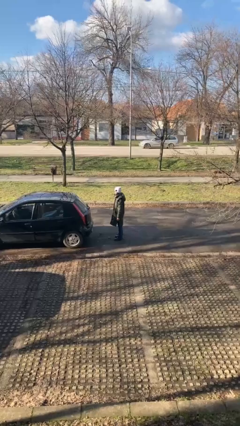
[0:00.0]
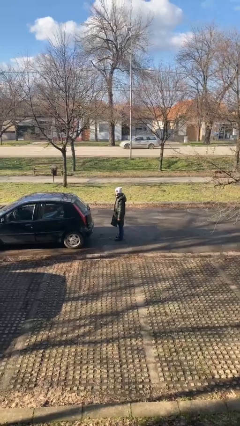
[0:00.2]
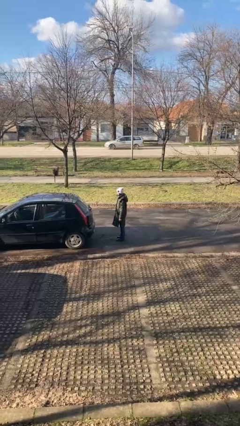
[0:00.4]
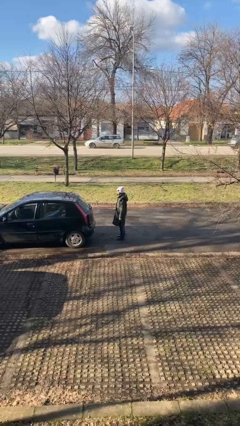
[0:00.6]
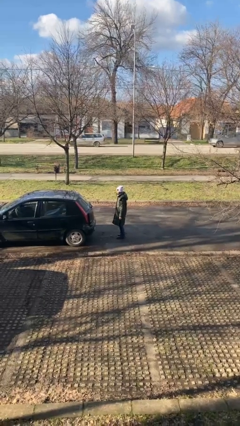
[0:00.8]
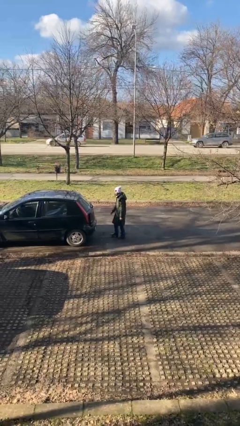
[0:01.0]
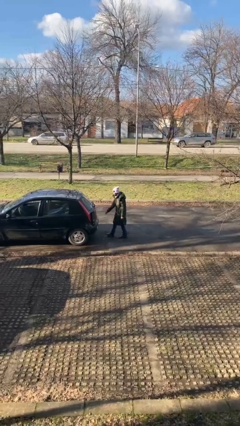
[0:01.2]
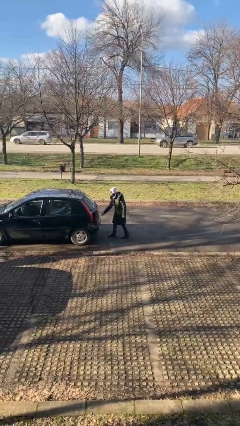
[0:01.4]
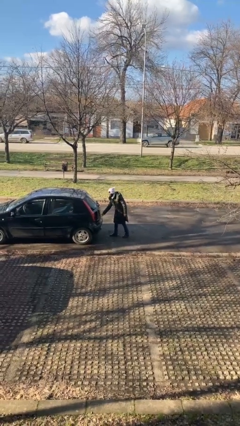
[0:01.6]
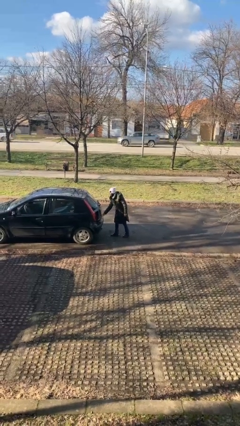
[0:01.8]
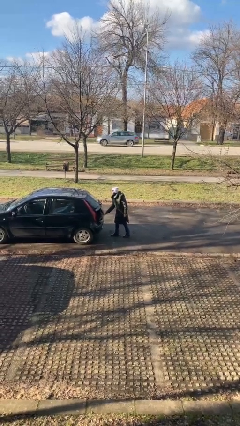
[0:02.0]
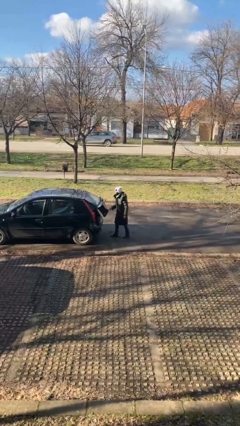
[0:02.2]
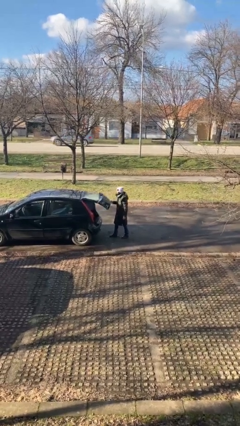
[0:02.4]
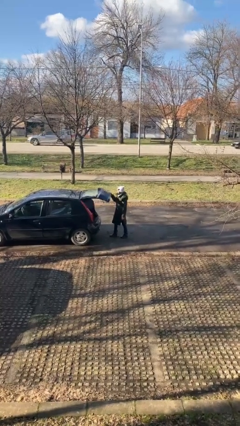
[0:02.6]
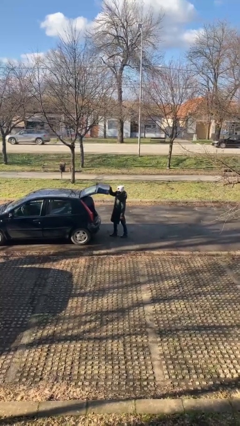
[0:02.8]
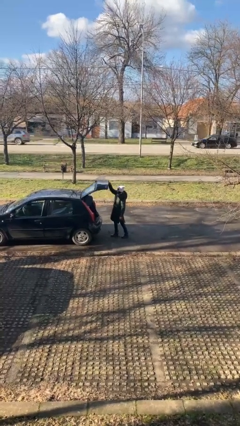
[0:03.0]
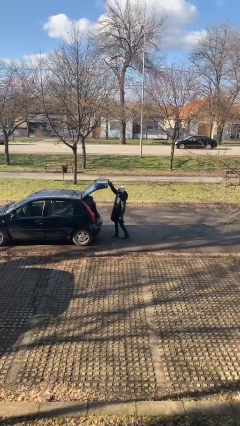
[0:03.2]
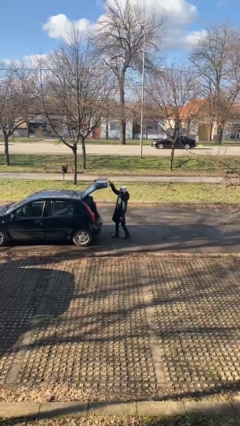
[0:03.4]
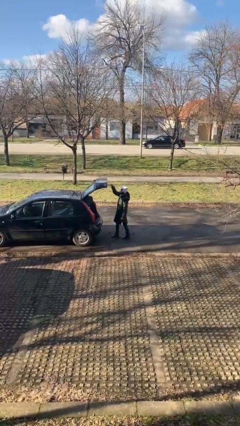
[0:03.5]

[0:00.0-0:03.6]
person opens car trunk

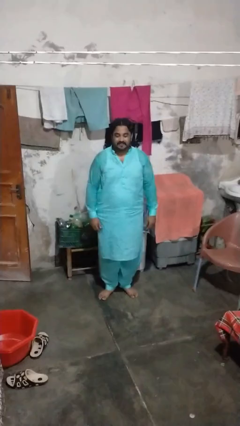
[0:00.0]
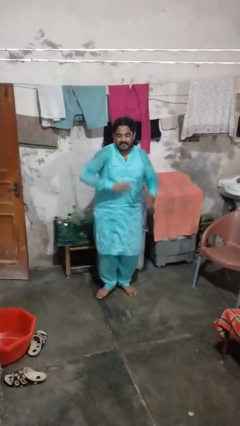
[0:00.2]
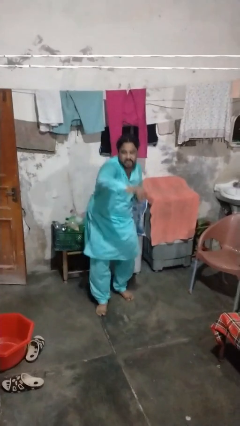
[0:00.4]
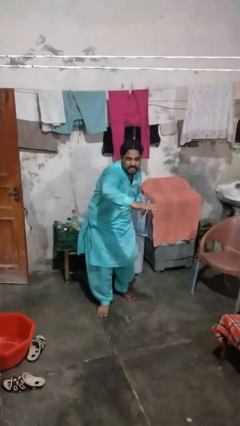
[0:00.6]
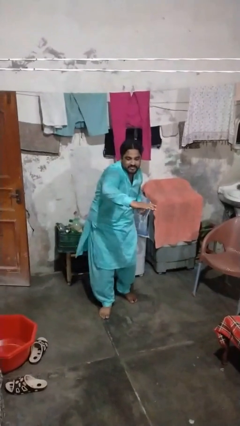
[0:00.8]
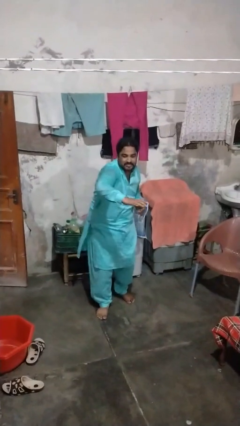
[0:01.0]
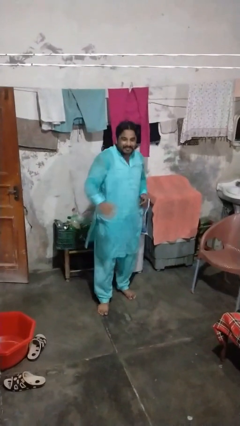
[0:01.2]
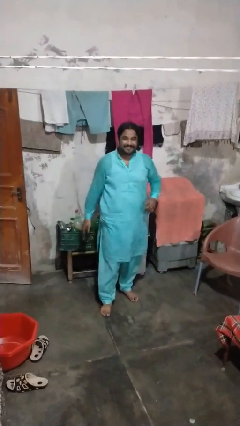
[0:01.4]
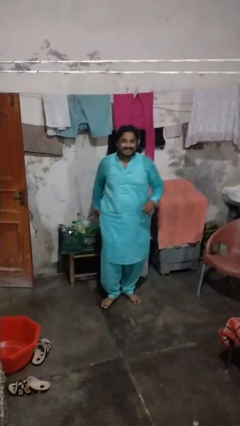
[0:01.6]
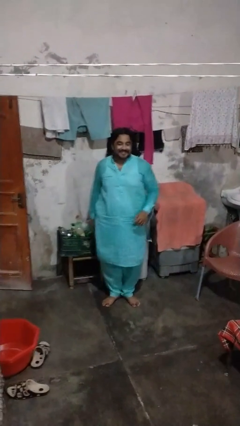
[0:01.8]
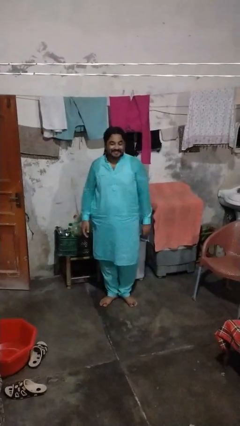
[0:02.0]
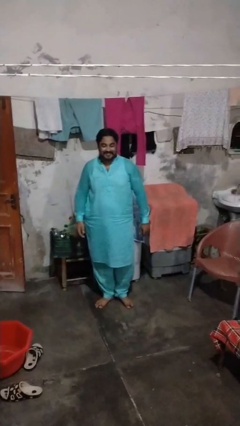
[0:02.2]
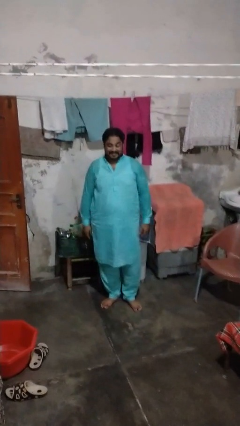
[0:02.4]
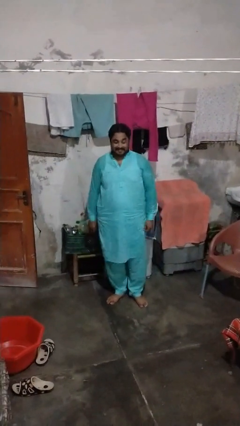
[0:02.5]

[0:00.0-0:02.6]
person karate chop

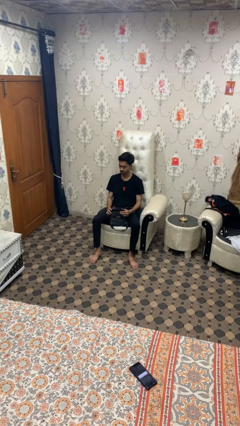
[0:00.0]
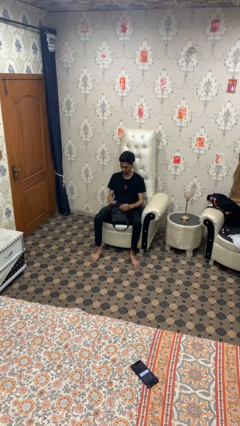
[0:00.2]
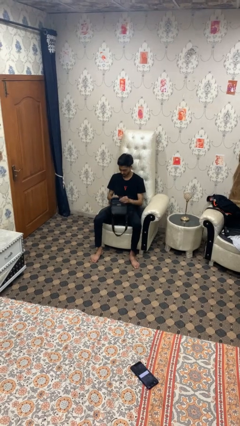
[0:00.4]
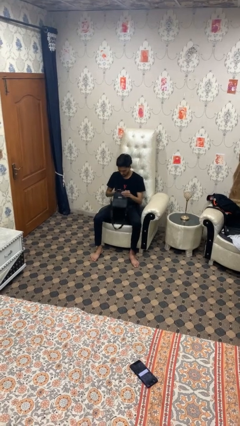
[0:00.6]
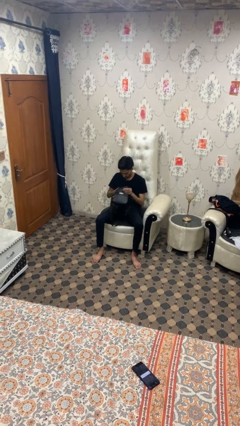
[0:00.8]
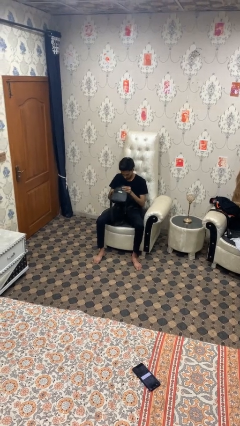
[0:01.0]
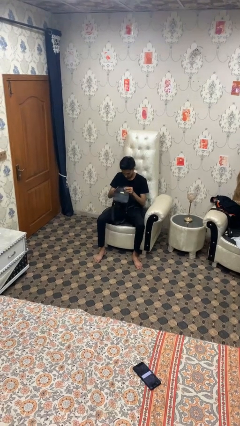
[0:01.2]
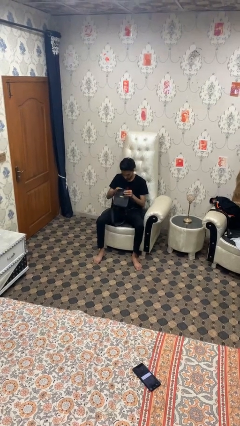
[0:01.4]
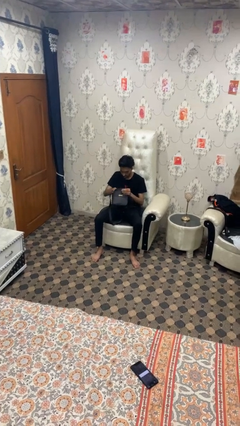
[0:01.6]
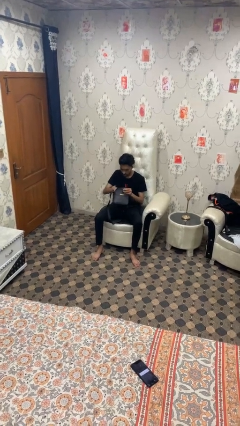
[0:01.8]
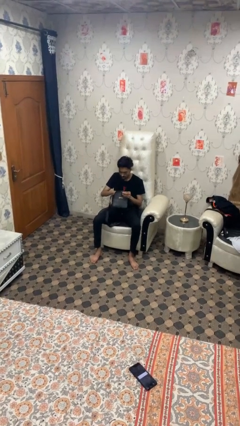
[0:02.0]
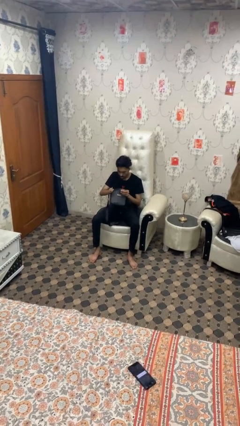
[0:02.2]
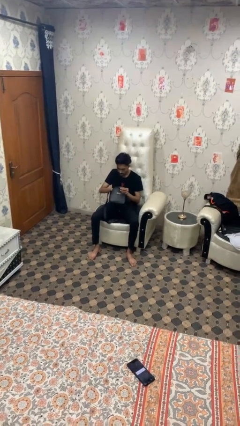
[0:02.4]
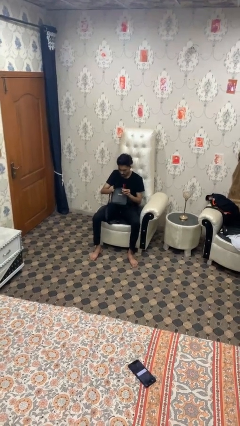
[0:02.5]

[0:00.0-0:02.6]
person searches in bag

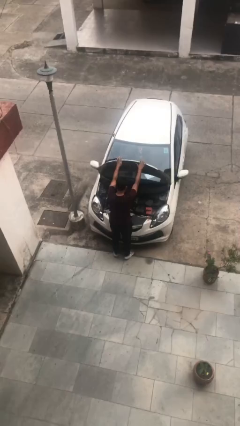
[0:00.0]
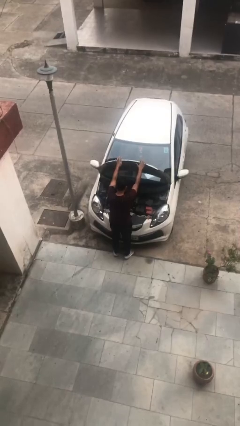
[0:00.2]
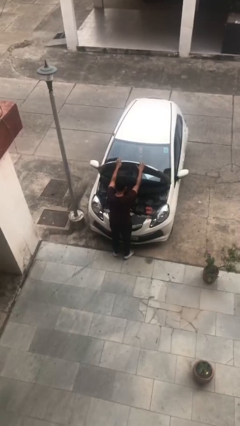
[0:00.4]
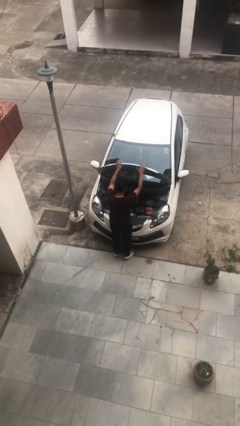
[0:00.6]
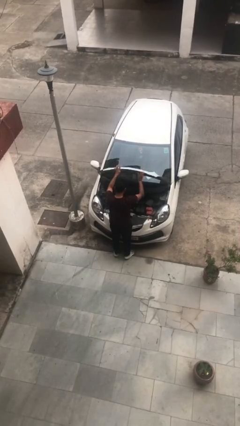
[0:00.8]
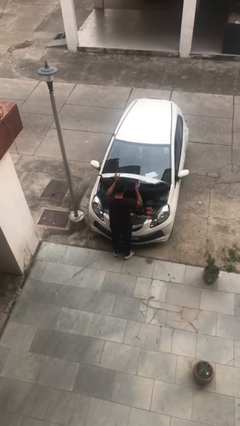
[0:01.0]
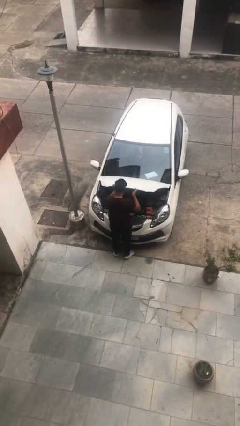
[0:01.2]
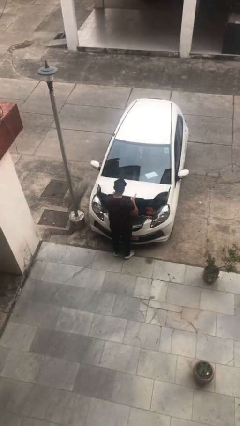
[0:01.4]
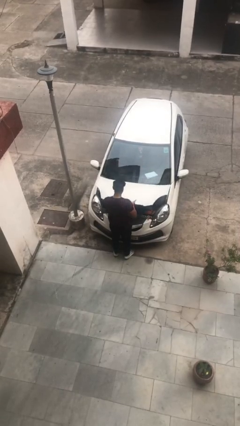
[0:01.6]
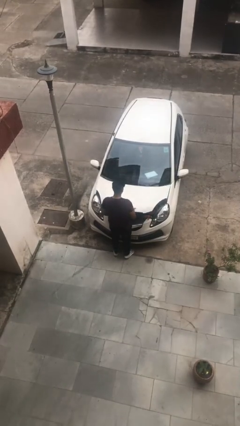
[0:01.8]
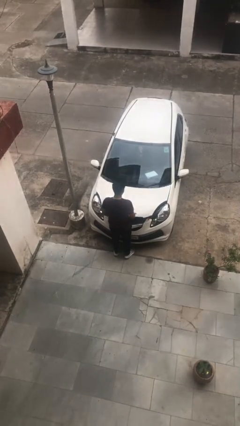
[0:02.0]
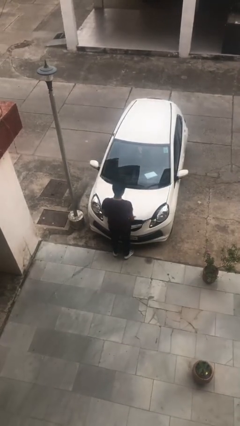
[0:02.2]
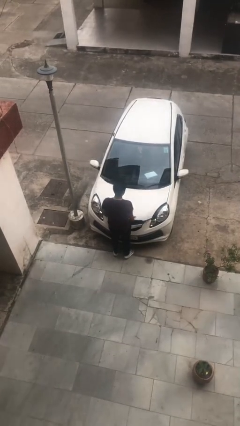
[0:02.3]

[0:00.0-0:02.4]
person closes car hood

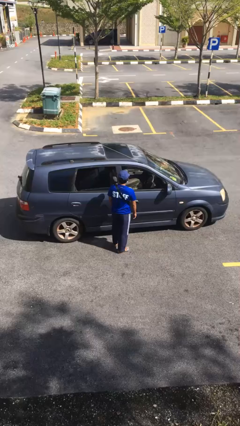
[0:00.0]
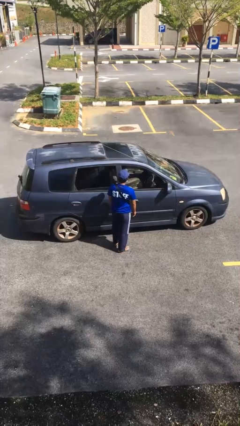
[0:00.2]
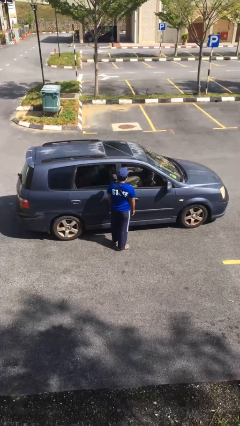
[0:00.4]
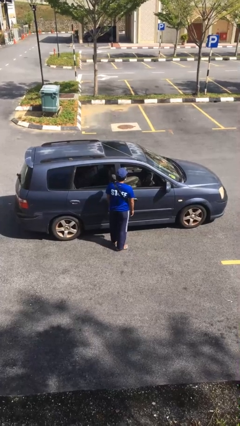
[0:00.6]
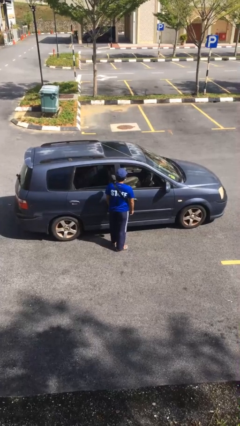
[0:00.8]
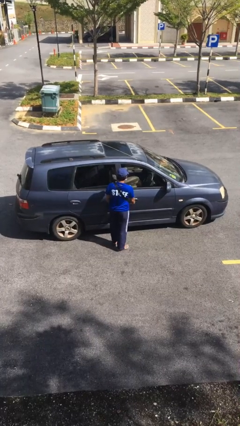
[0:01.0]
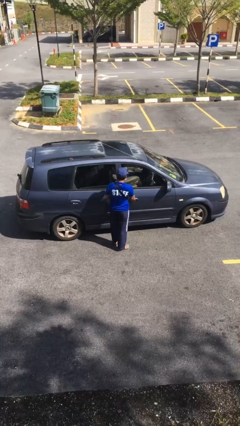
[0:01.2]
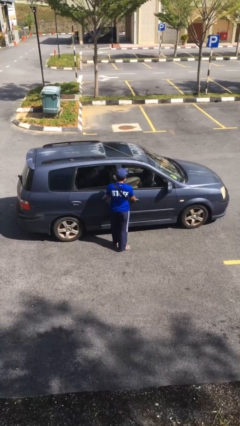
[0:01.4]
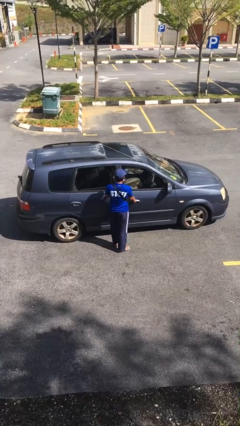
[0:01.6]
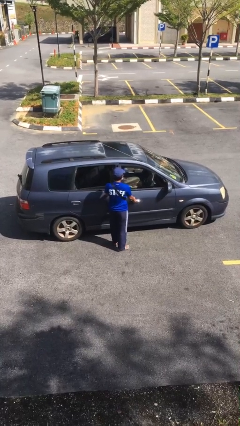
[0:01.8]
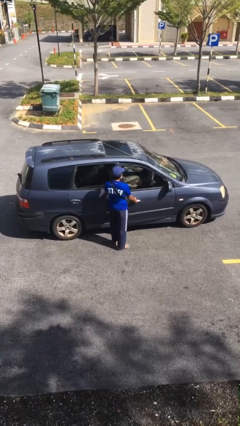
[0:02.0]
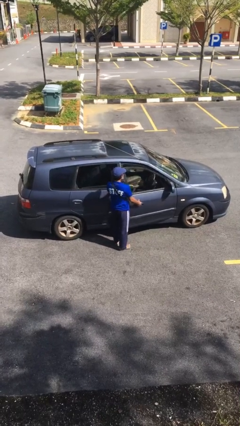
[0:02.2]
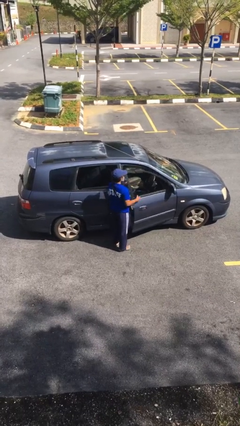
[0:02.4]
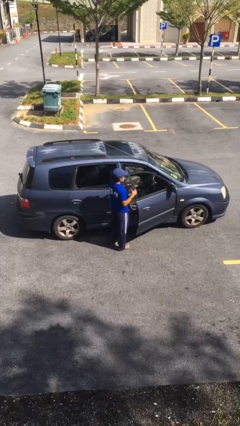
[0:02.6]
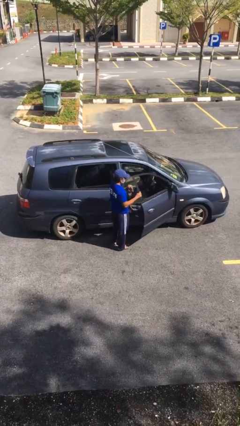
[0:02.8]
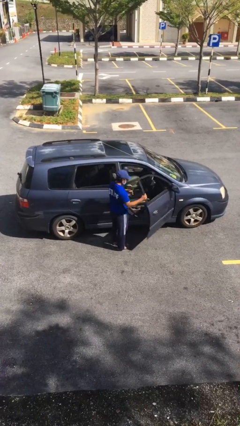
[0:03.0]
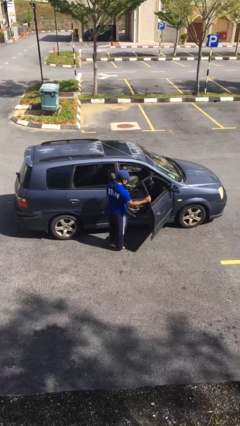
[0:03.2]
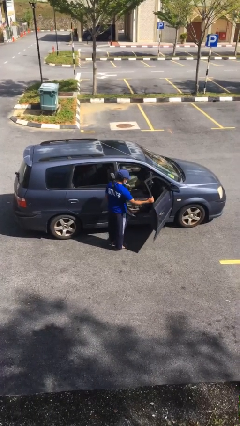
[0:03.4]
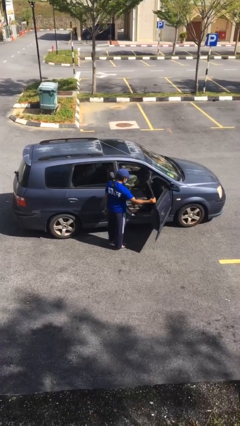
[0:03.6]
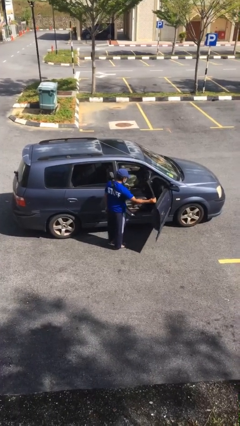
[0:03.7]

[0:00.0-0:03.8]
person opens car door

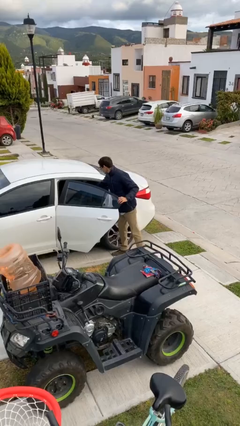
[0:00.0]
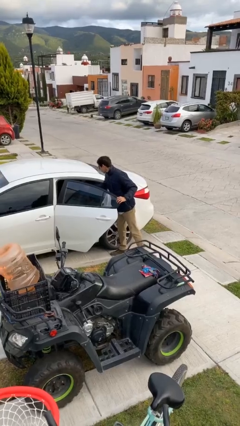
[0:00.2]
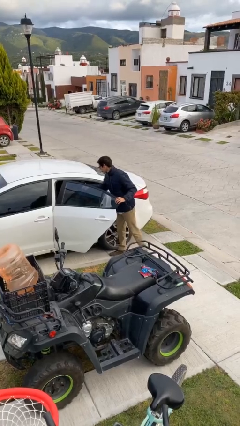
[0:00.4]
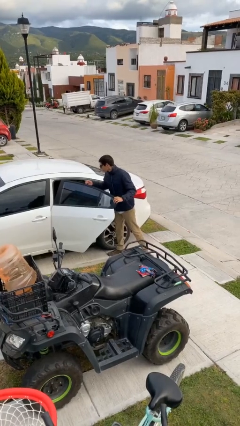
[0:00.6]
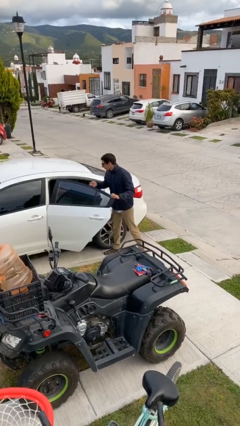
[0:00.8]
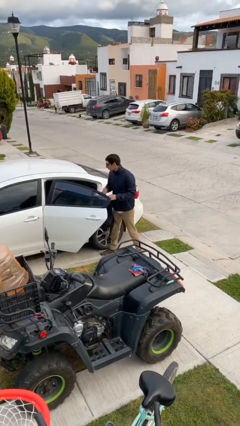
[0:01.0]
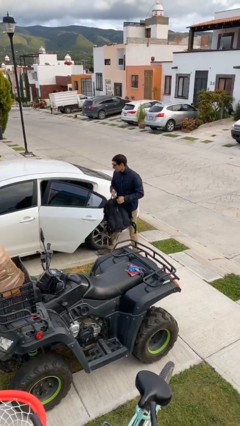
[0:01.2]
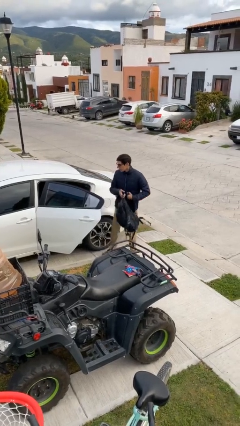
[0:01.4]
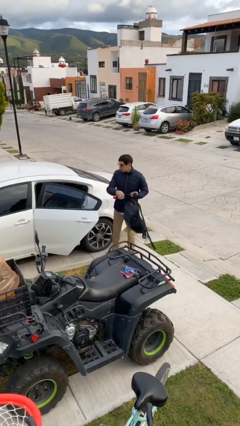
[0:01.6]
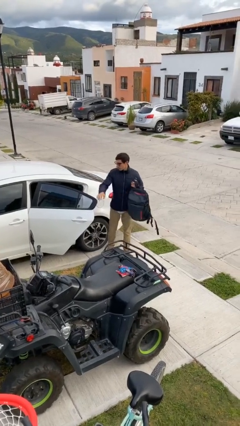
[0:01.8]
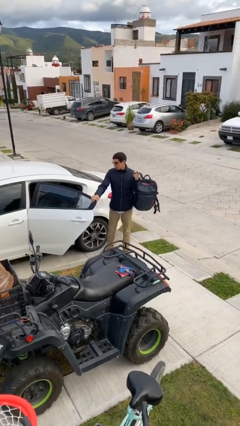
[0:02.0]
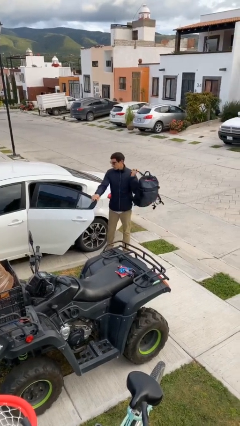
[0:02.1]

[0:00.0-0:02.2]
person unloads car
